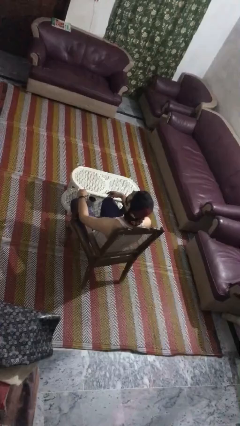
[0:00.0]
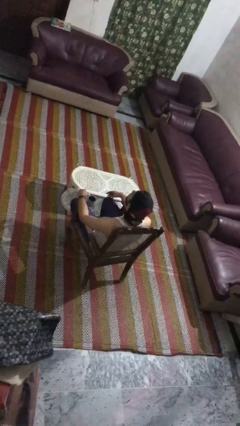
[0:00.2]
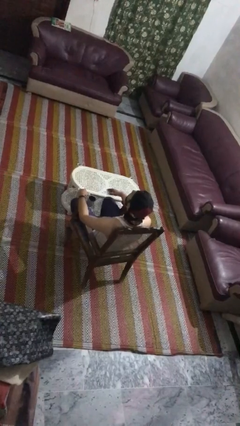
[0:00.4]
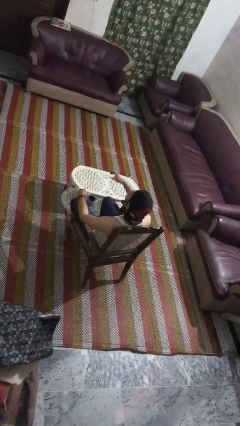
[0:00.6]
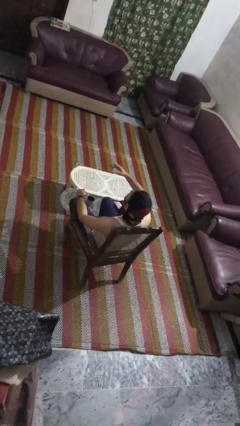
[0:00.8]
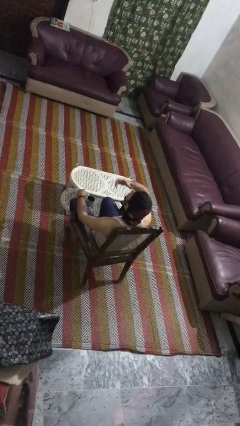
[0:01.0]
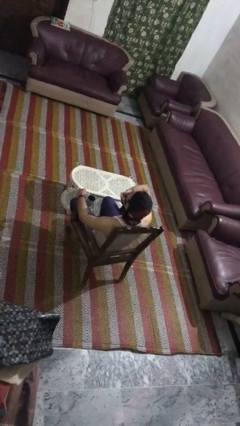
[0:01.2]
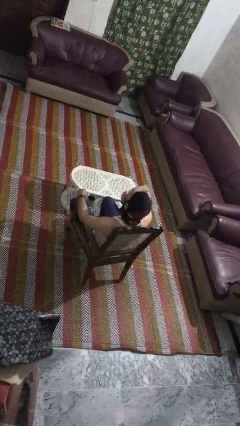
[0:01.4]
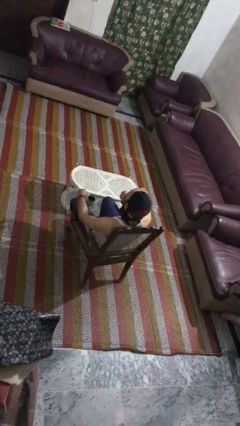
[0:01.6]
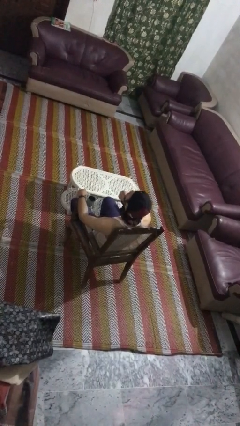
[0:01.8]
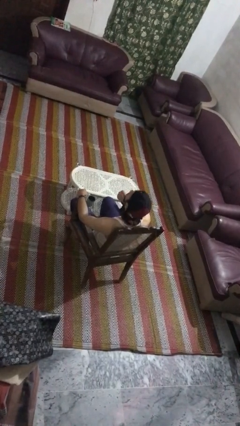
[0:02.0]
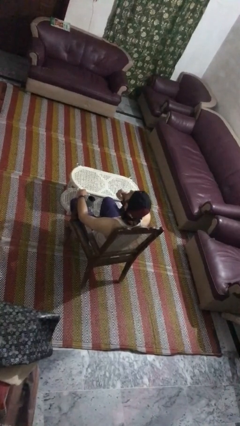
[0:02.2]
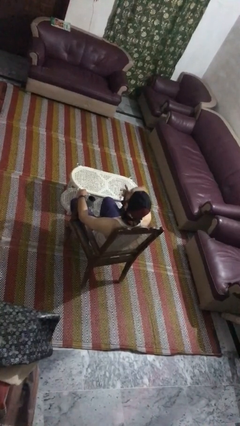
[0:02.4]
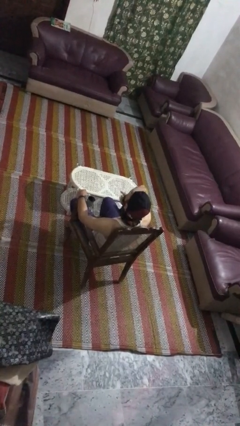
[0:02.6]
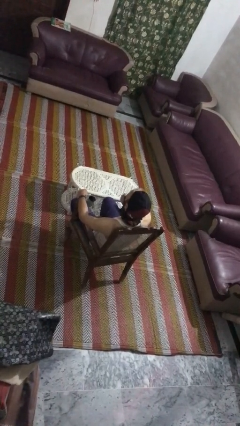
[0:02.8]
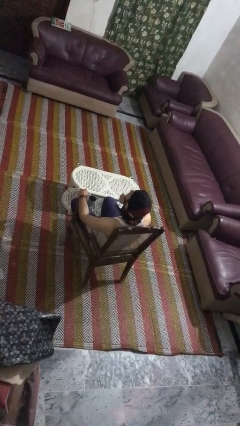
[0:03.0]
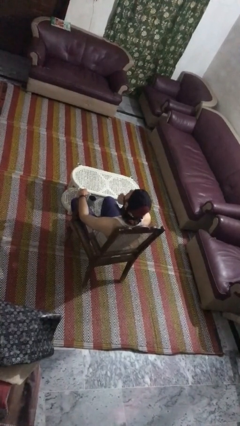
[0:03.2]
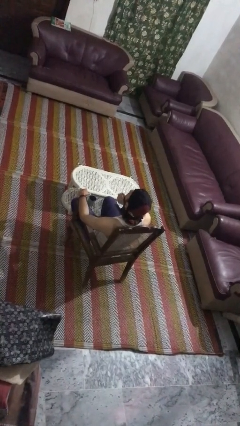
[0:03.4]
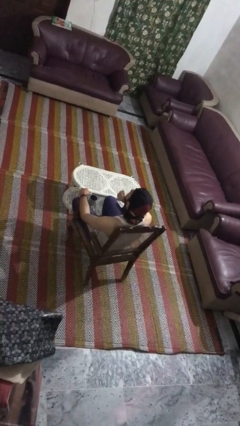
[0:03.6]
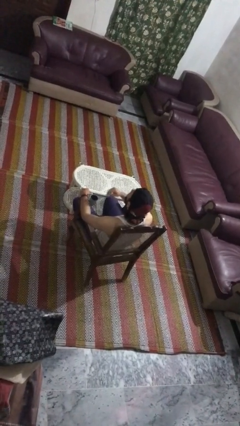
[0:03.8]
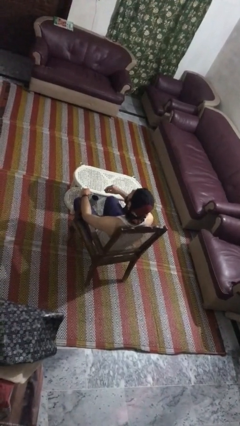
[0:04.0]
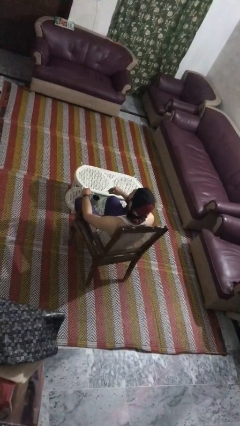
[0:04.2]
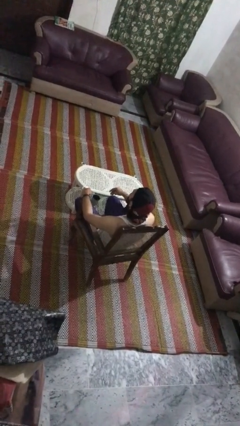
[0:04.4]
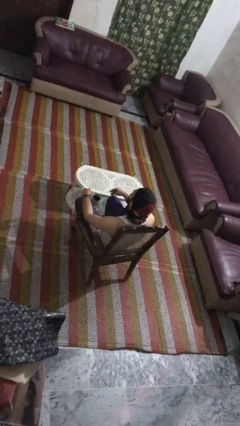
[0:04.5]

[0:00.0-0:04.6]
person strokes chin

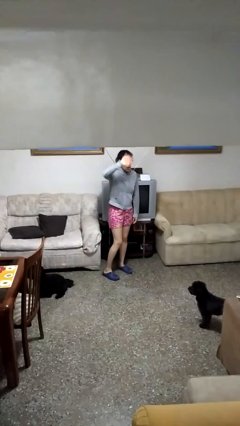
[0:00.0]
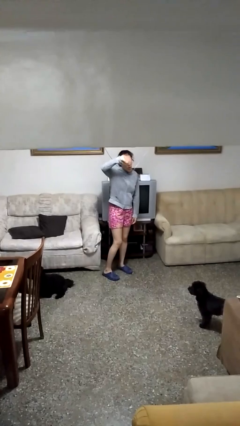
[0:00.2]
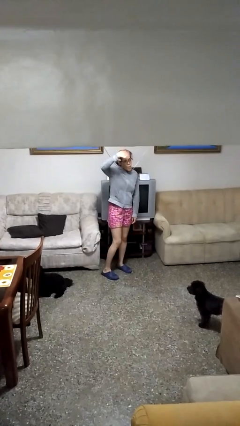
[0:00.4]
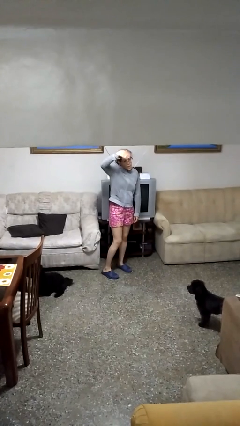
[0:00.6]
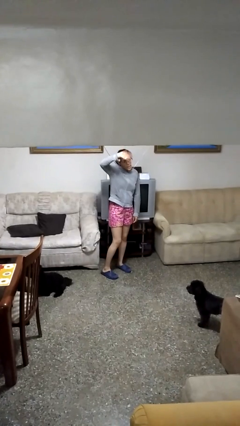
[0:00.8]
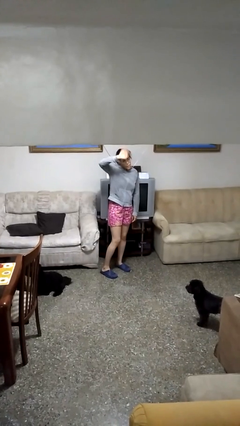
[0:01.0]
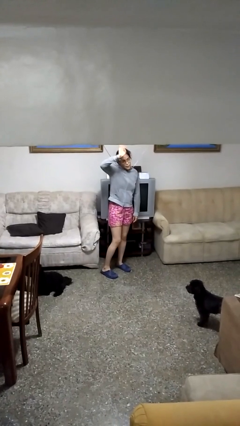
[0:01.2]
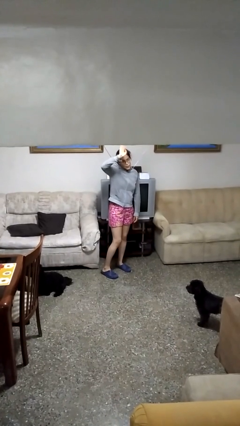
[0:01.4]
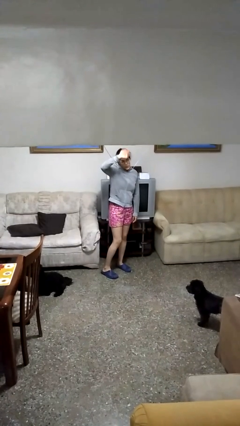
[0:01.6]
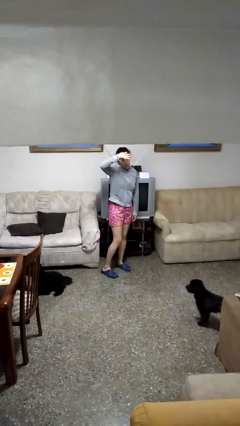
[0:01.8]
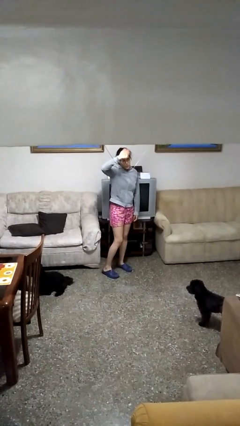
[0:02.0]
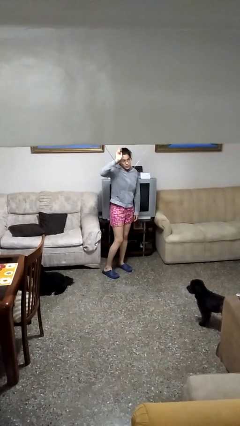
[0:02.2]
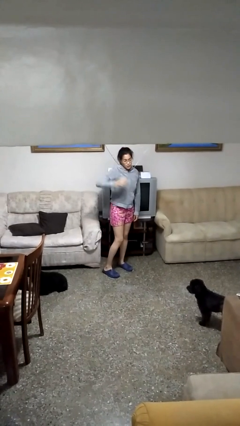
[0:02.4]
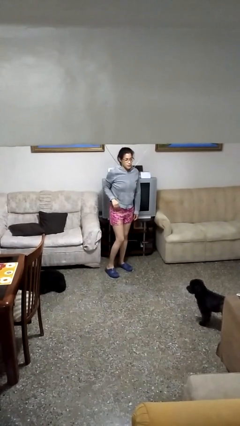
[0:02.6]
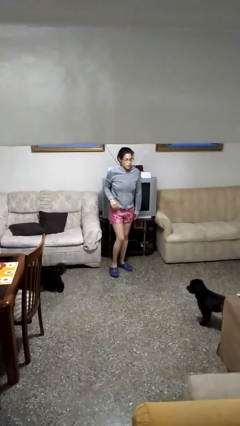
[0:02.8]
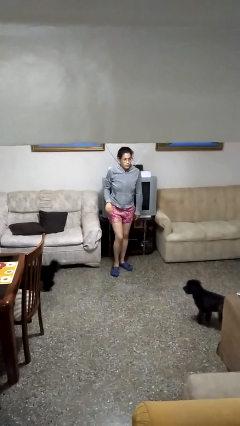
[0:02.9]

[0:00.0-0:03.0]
person waves at person

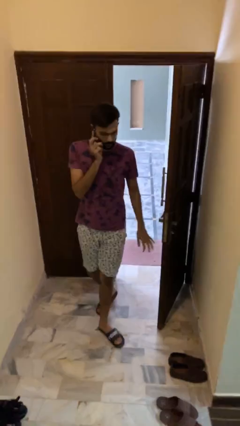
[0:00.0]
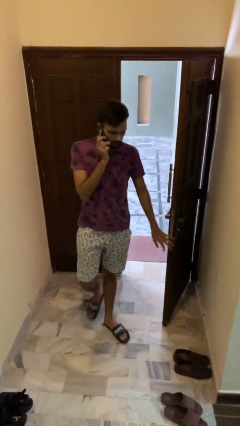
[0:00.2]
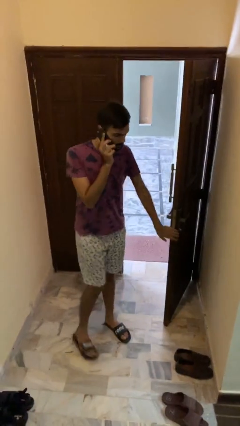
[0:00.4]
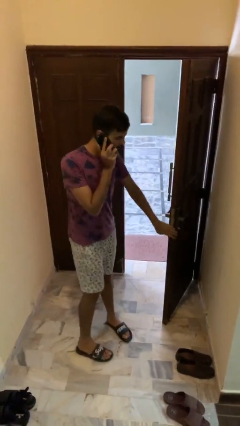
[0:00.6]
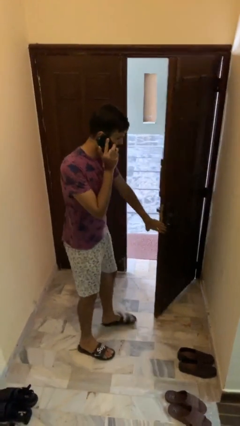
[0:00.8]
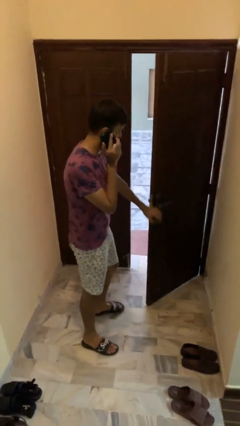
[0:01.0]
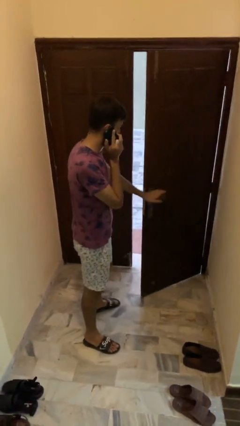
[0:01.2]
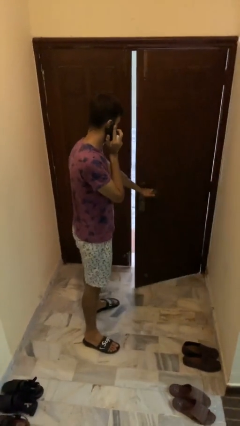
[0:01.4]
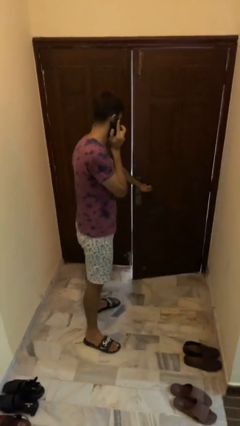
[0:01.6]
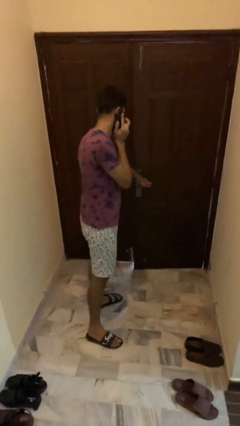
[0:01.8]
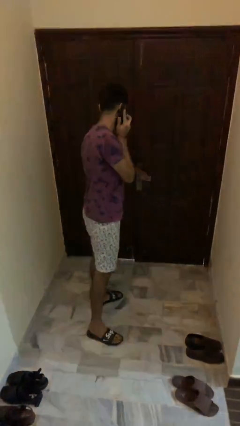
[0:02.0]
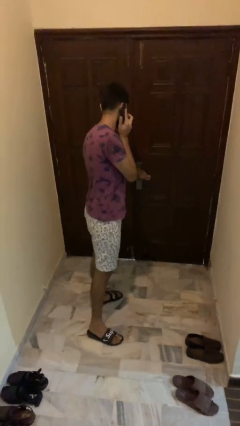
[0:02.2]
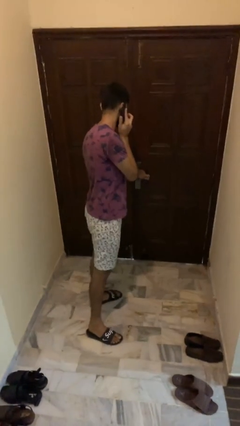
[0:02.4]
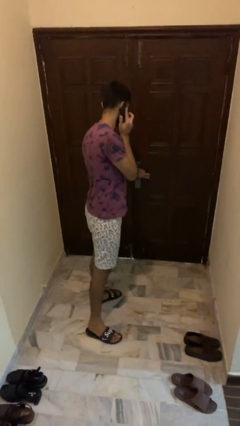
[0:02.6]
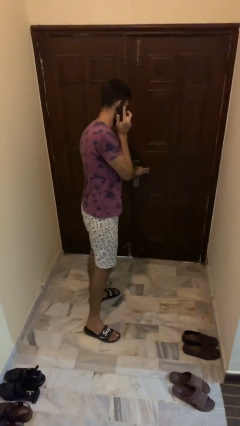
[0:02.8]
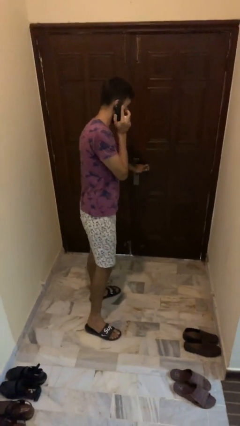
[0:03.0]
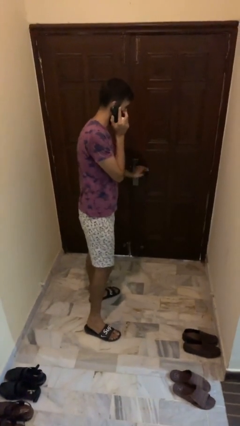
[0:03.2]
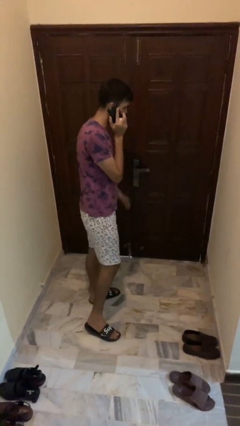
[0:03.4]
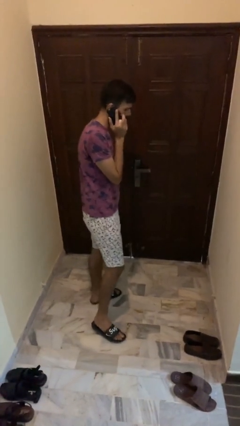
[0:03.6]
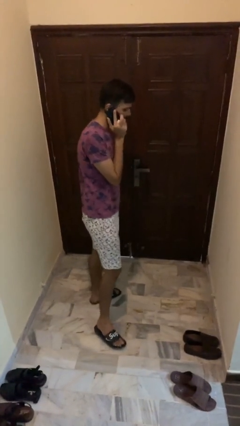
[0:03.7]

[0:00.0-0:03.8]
person closes facility door

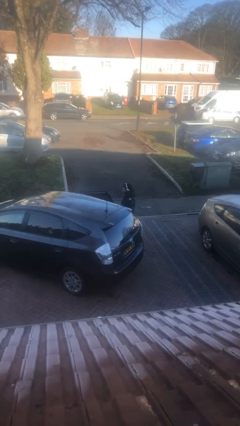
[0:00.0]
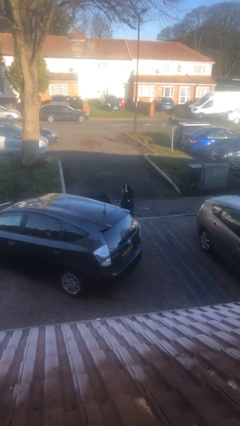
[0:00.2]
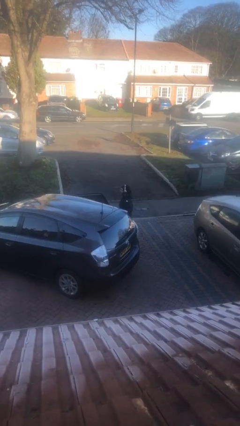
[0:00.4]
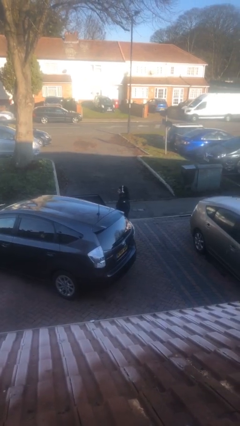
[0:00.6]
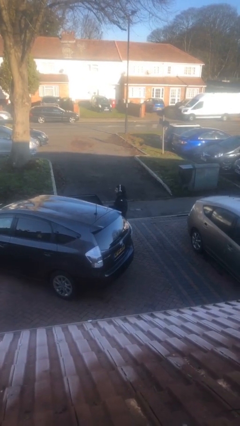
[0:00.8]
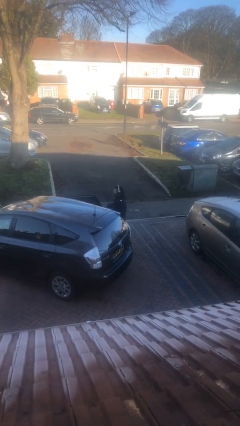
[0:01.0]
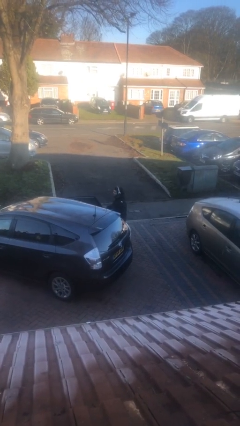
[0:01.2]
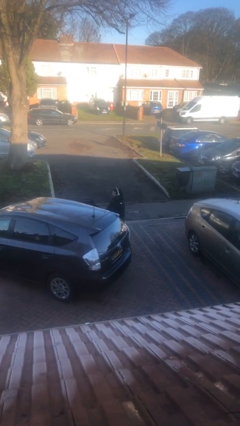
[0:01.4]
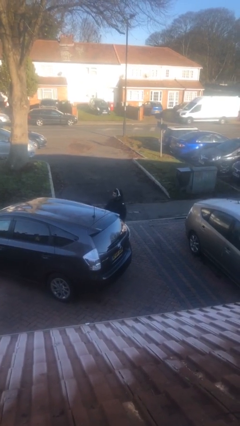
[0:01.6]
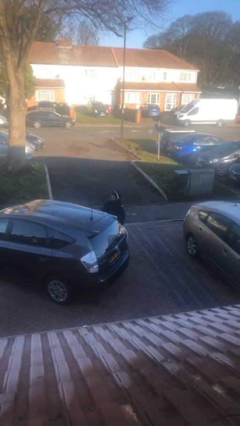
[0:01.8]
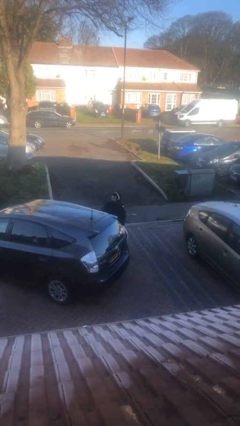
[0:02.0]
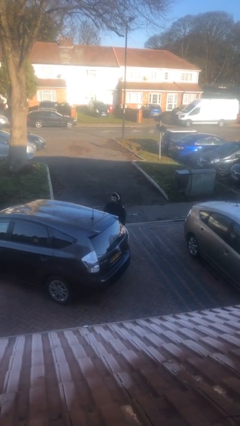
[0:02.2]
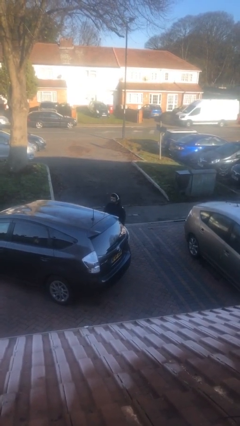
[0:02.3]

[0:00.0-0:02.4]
person closes car door

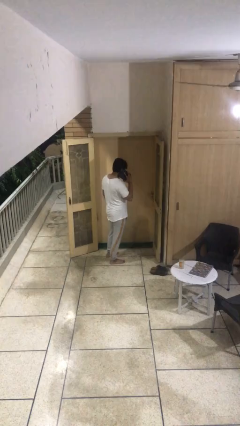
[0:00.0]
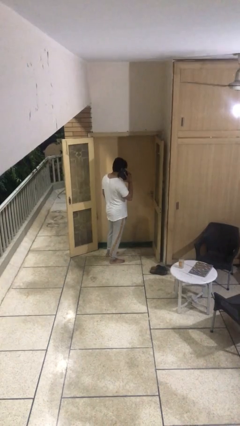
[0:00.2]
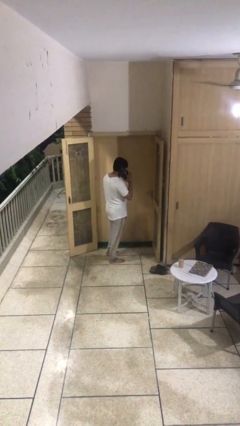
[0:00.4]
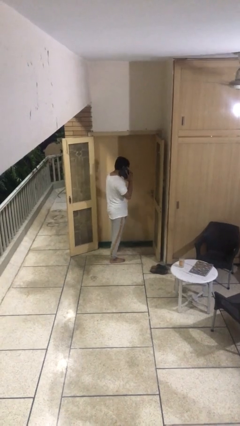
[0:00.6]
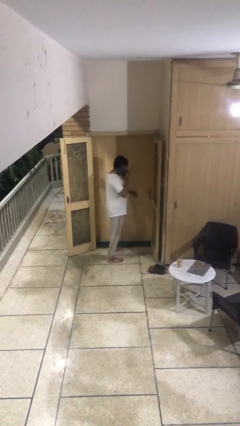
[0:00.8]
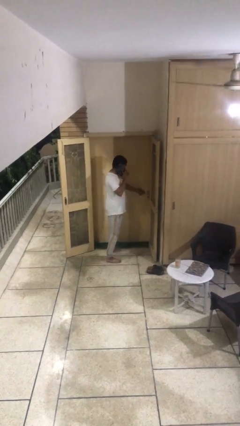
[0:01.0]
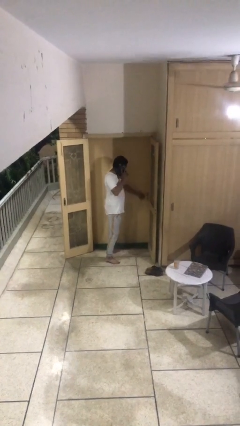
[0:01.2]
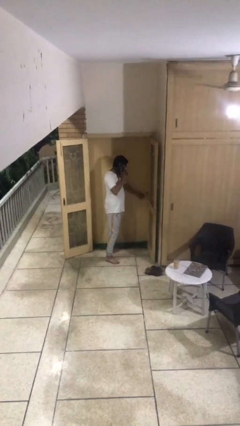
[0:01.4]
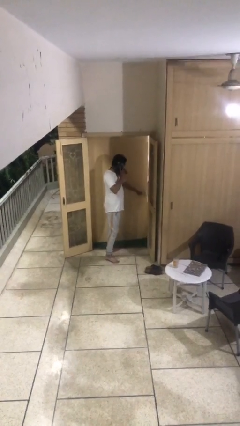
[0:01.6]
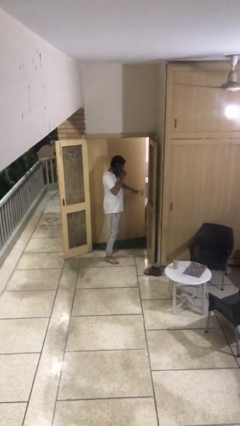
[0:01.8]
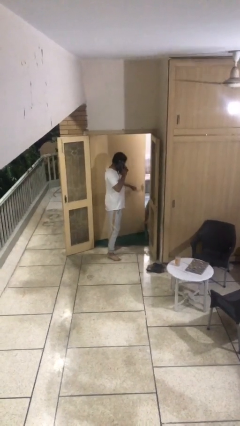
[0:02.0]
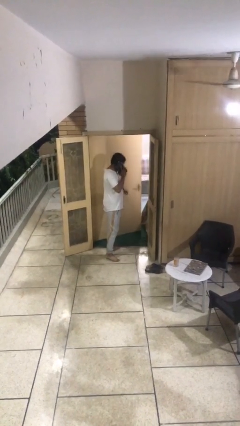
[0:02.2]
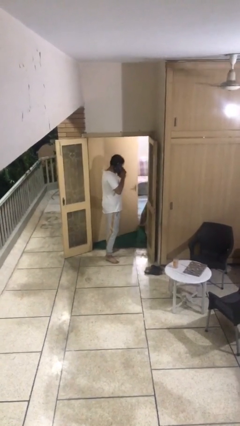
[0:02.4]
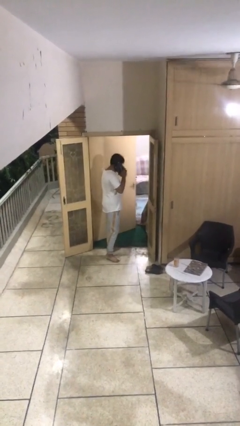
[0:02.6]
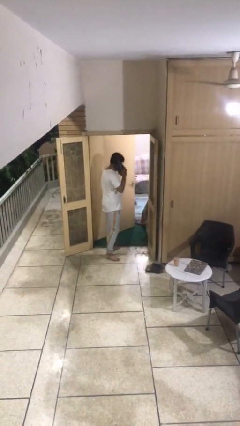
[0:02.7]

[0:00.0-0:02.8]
person opens facility door

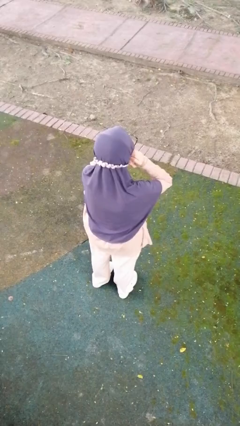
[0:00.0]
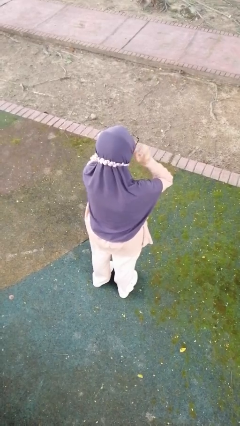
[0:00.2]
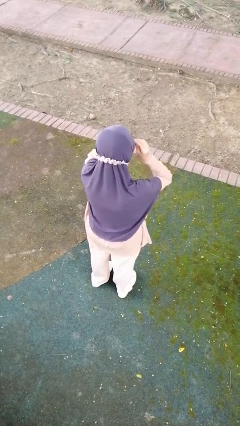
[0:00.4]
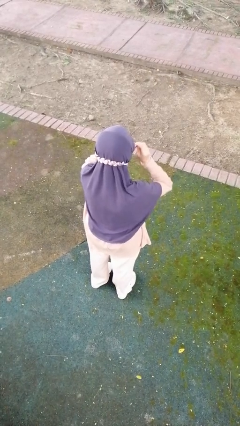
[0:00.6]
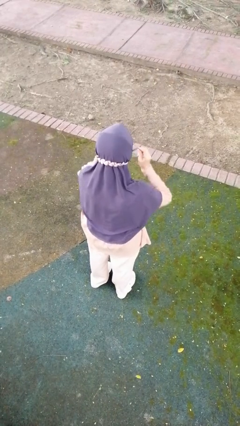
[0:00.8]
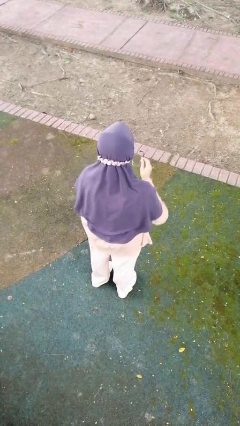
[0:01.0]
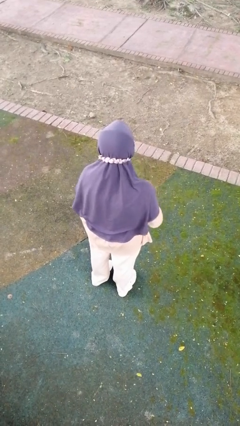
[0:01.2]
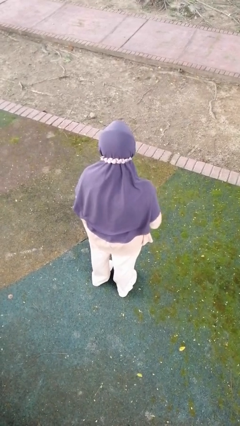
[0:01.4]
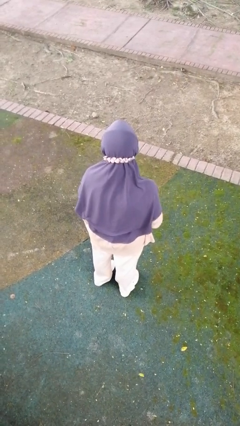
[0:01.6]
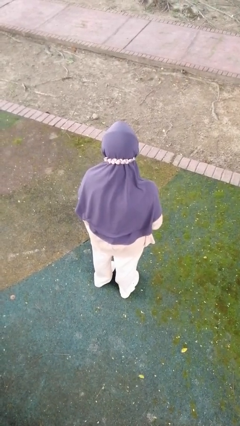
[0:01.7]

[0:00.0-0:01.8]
person takes off glasses
